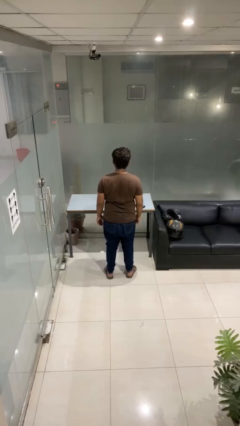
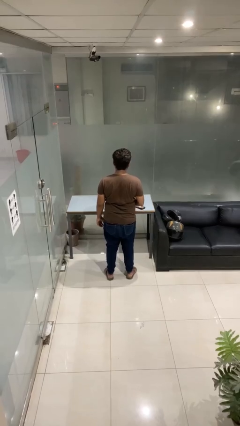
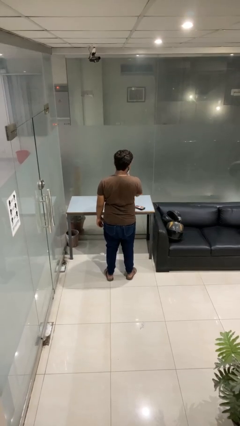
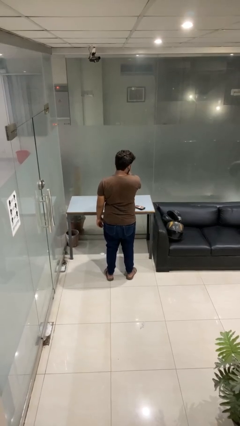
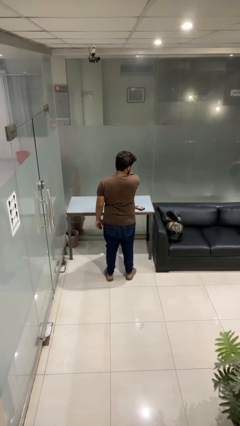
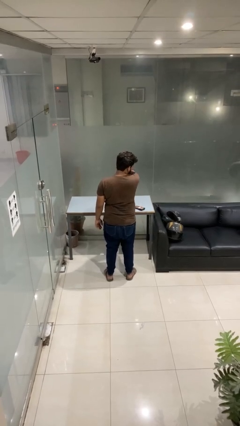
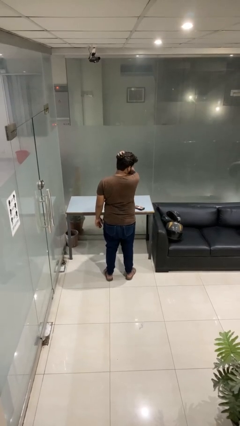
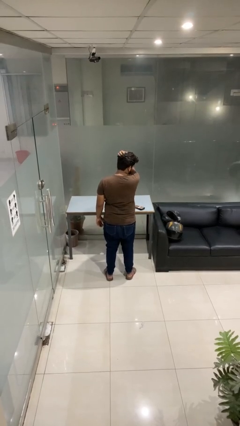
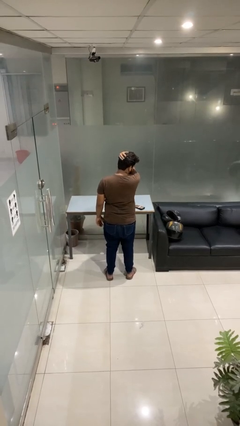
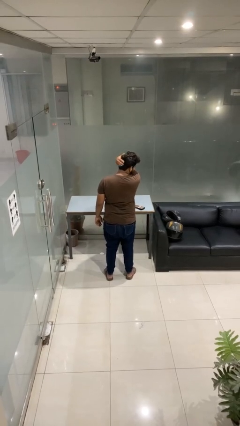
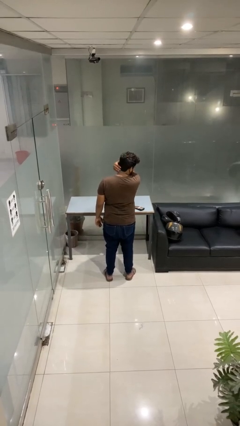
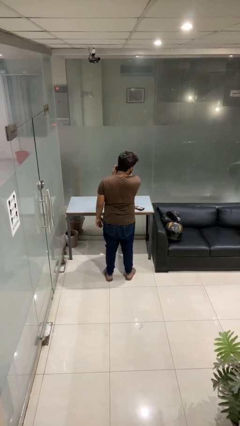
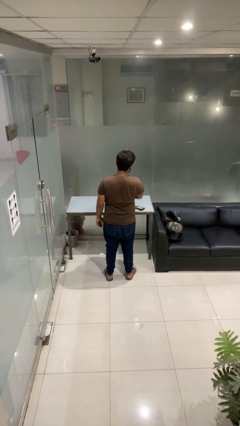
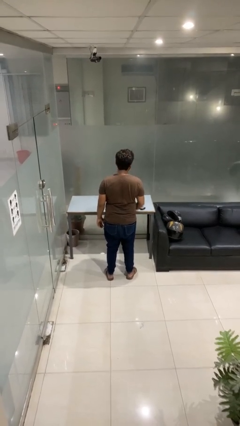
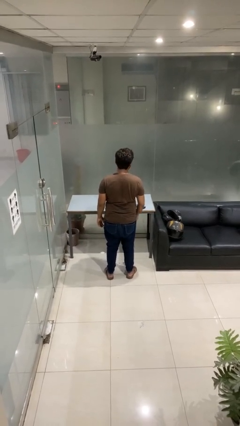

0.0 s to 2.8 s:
person strokes hair

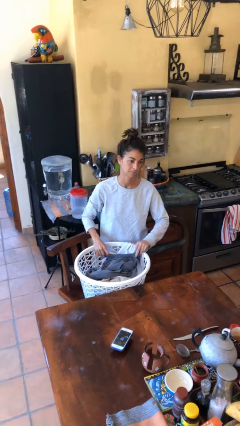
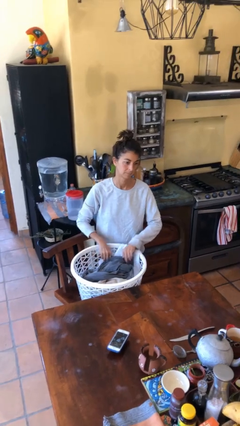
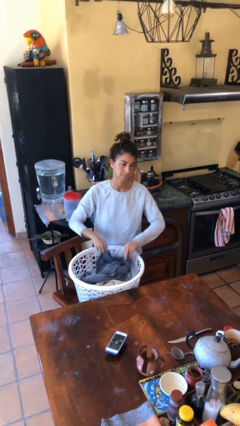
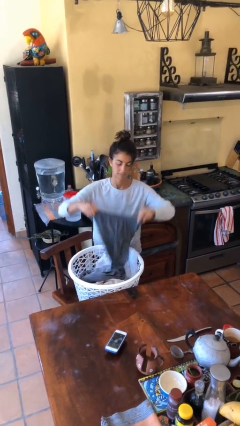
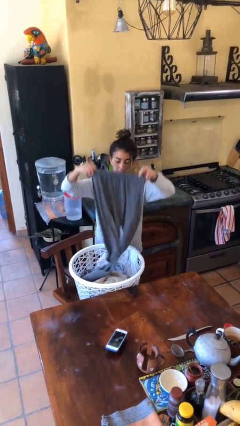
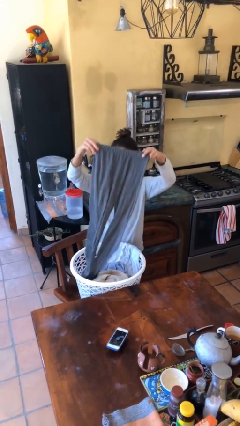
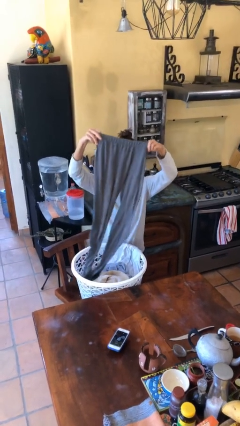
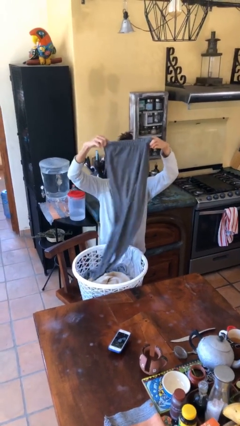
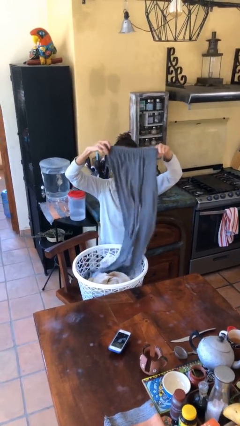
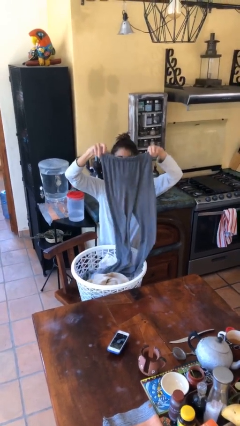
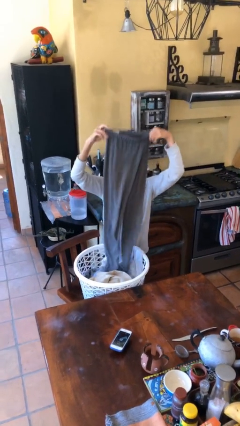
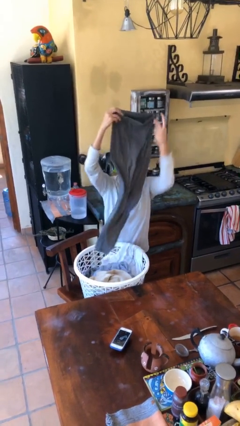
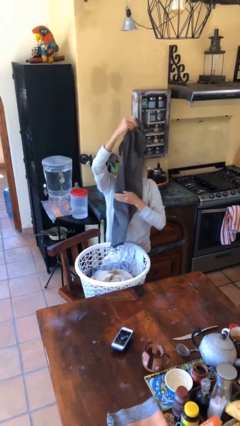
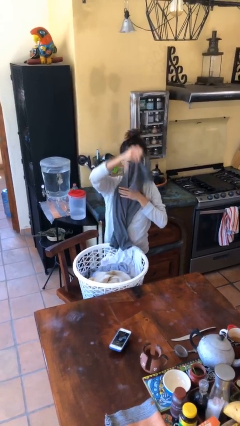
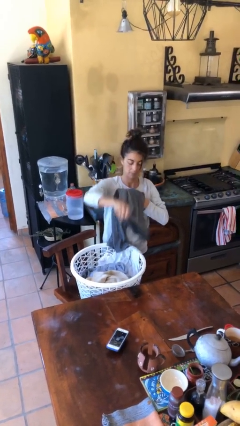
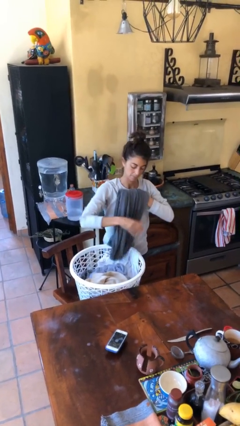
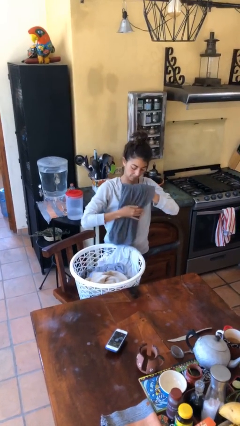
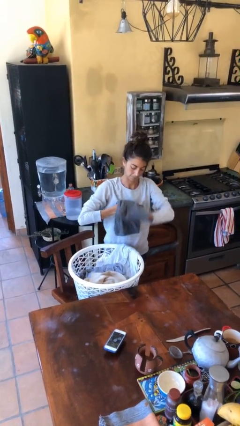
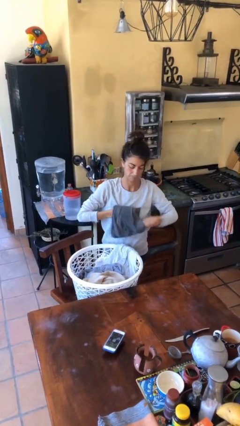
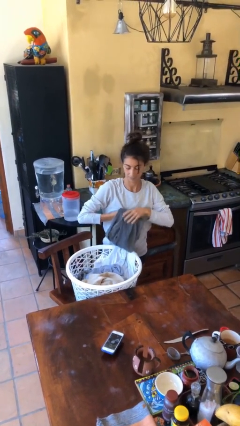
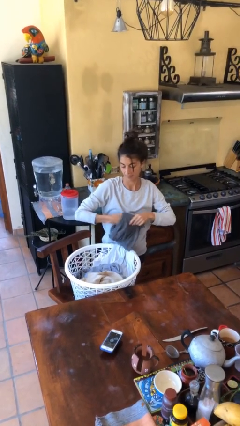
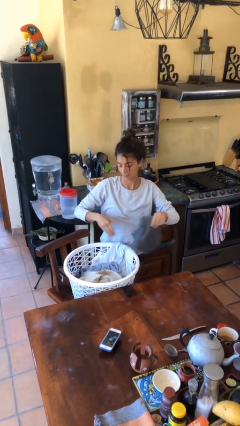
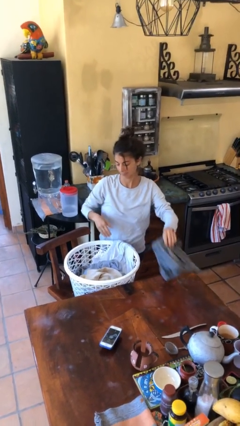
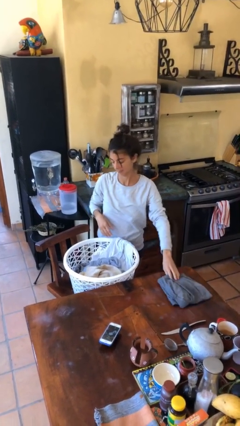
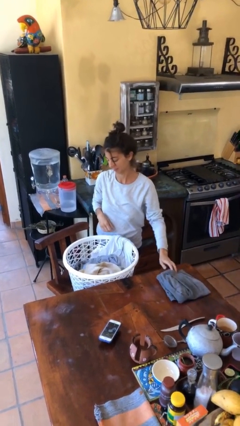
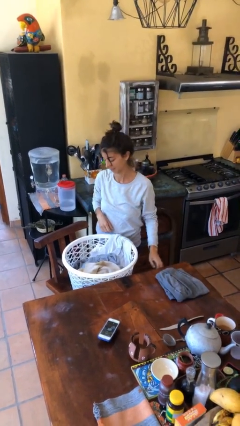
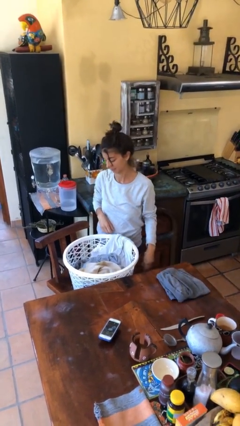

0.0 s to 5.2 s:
person folds pants

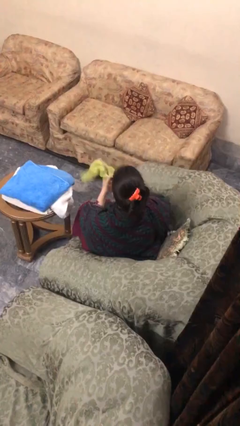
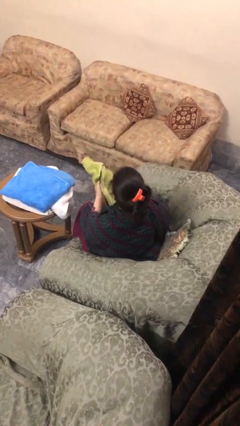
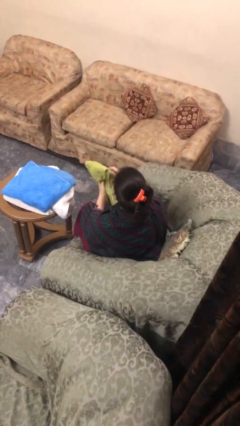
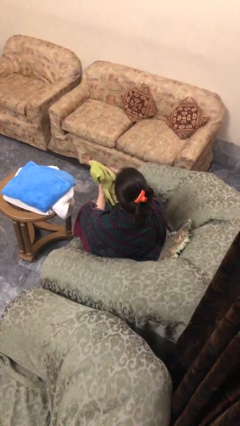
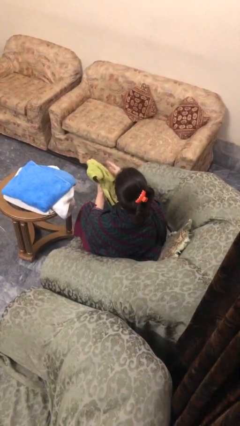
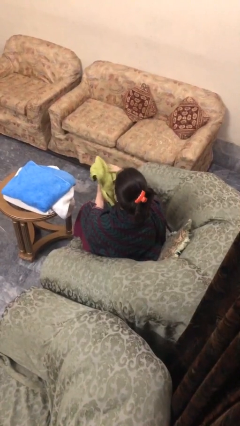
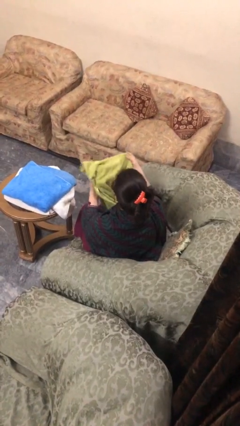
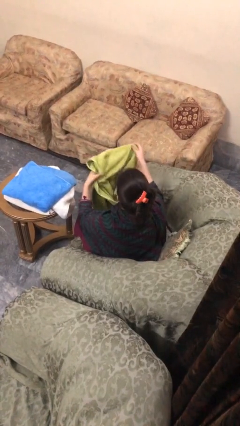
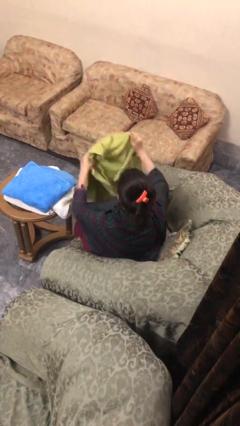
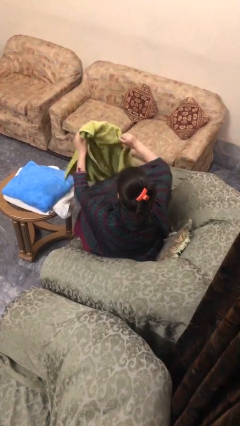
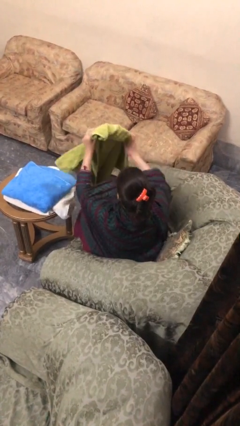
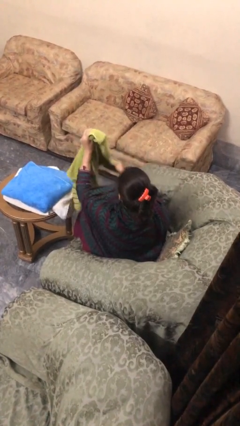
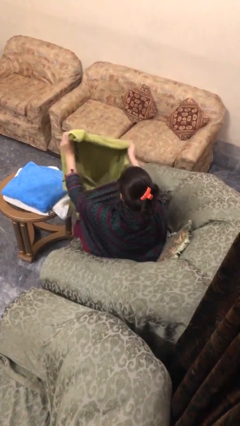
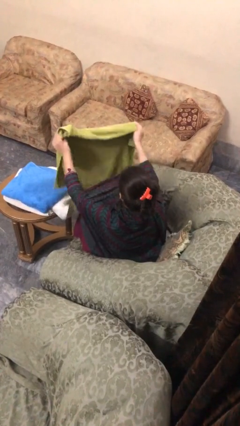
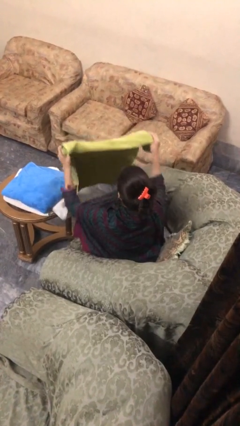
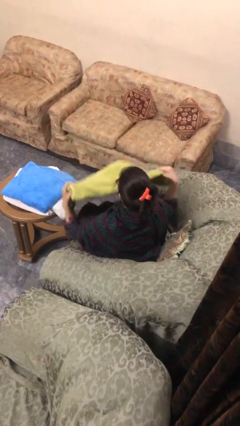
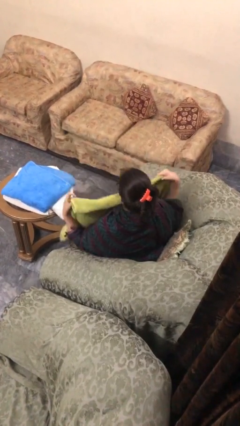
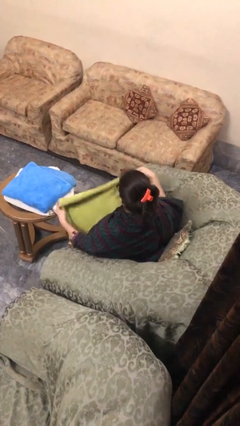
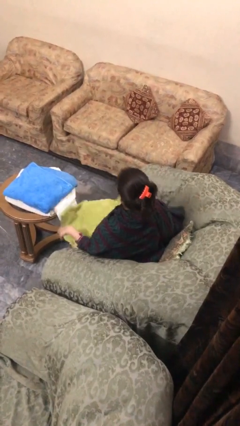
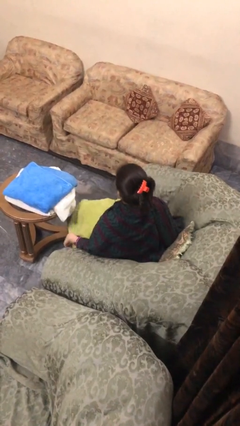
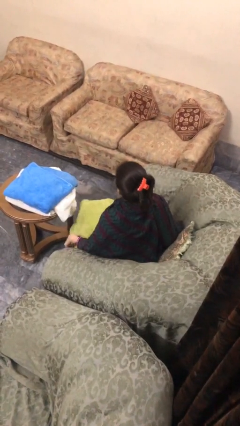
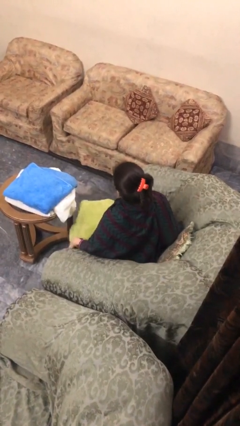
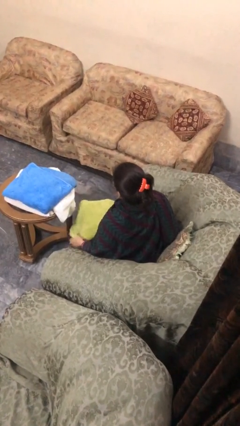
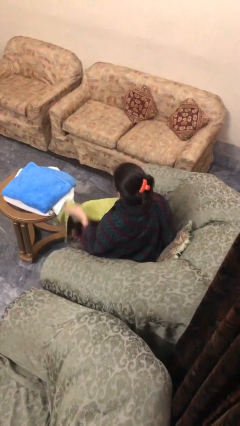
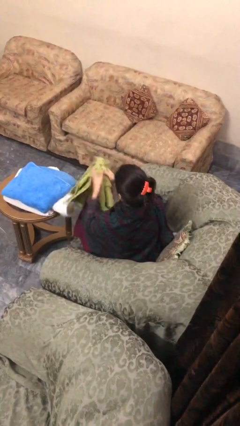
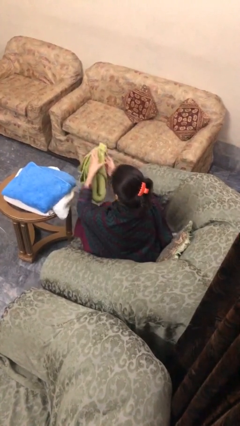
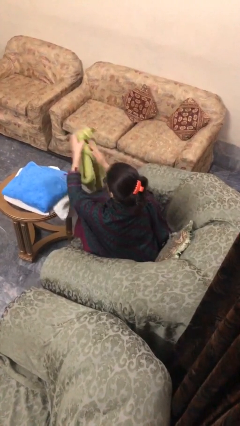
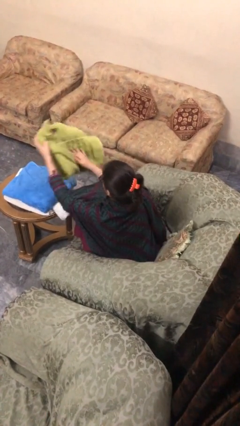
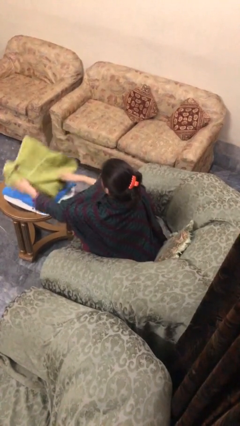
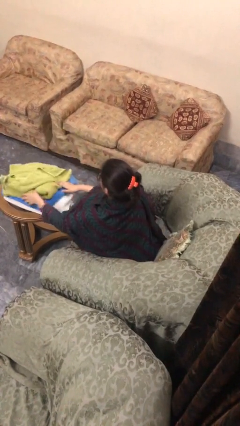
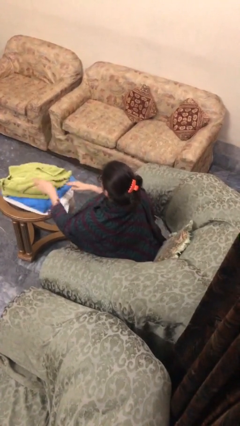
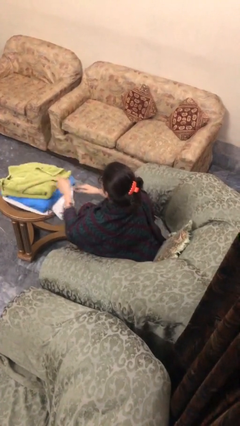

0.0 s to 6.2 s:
person folds towel

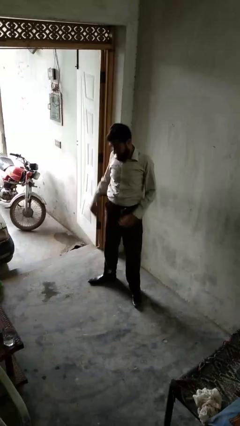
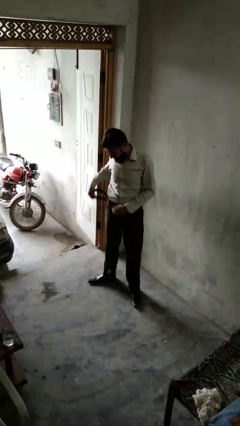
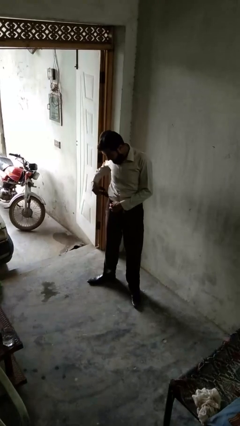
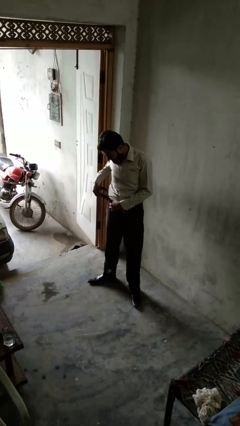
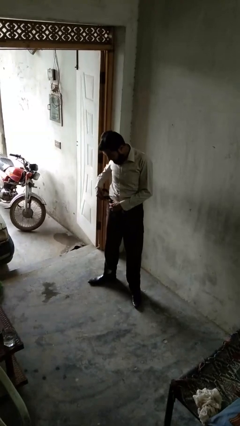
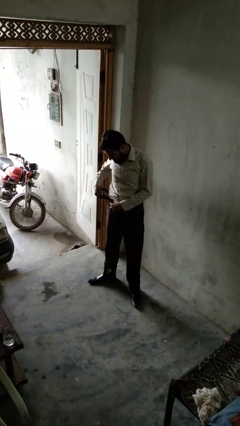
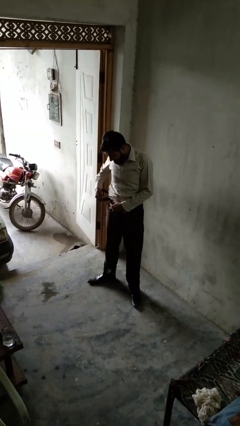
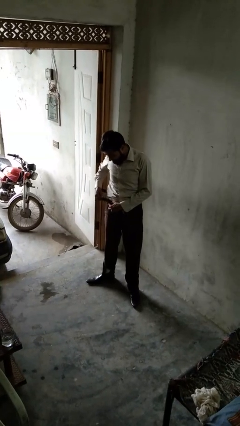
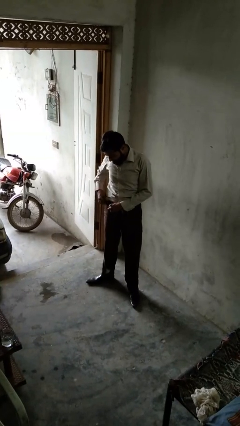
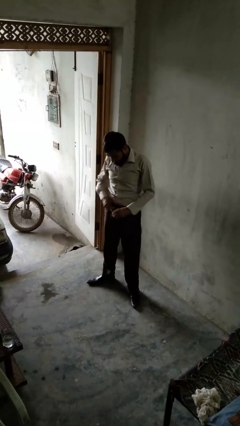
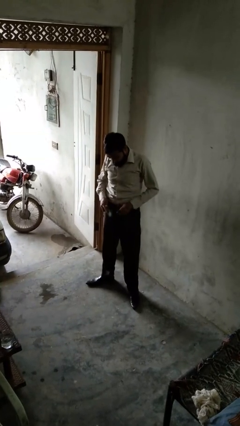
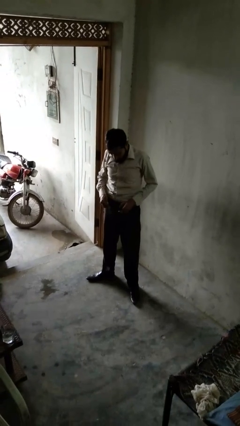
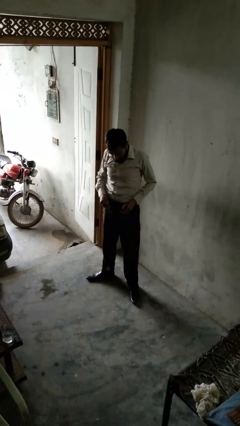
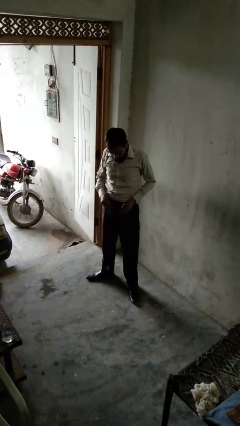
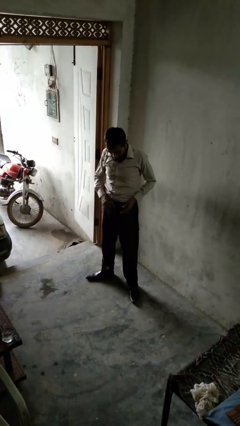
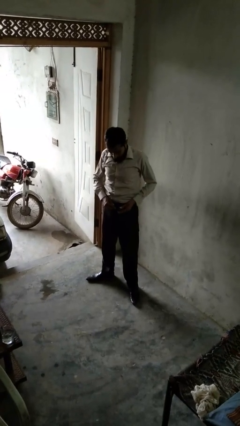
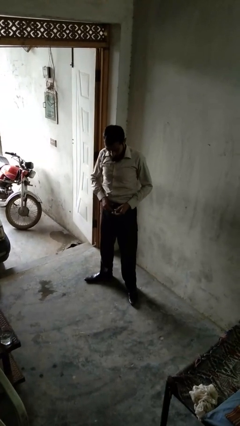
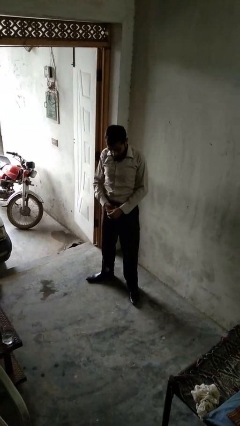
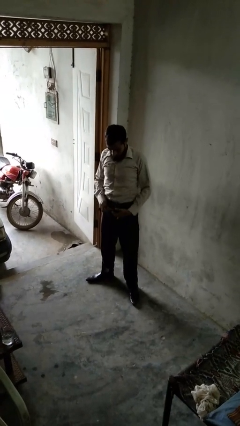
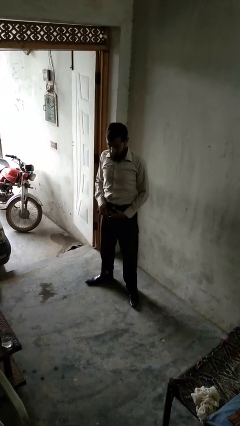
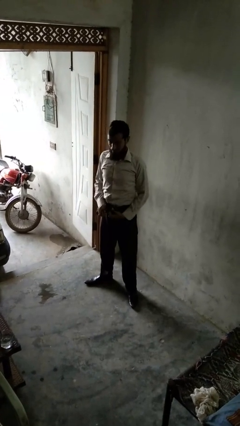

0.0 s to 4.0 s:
person puts on belt
